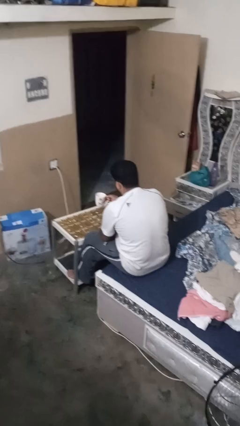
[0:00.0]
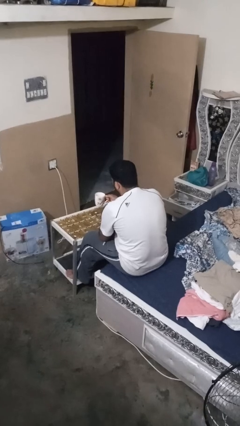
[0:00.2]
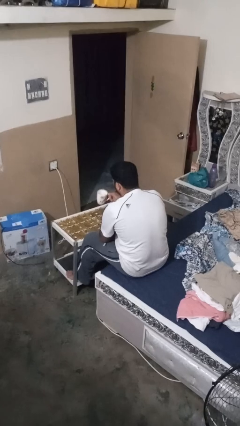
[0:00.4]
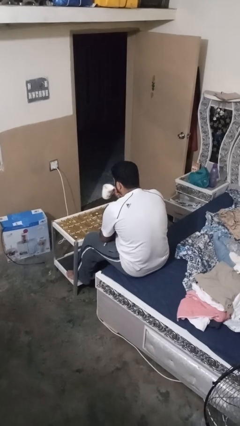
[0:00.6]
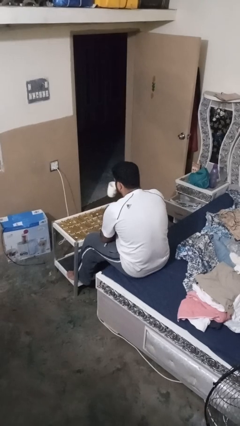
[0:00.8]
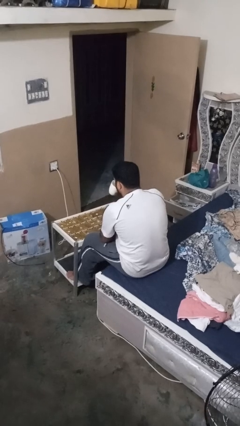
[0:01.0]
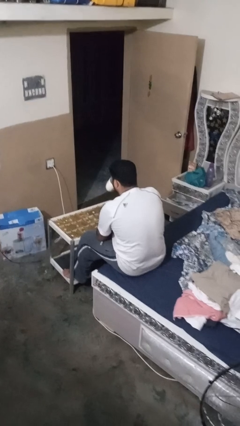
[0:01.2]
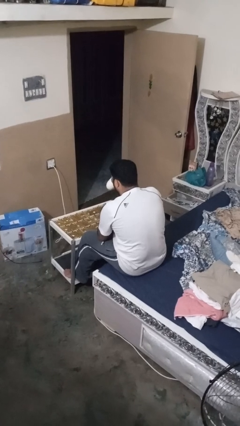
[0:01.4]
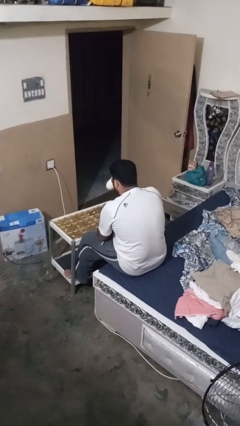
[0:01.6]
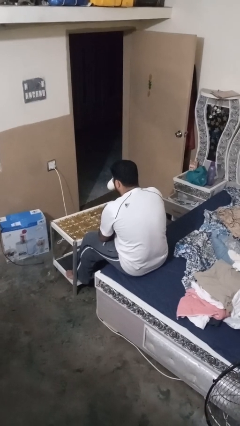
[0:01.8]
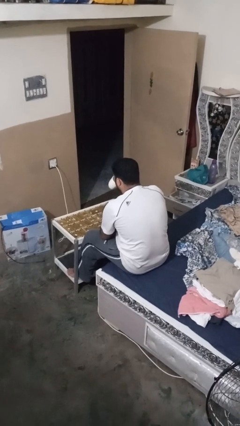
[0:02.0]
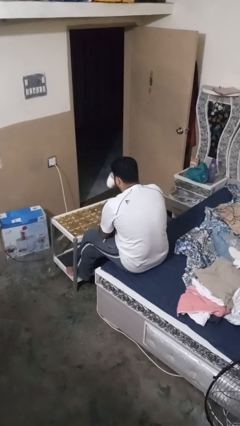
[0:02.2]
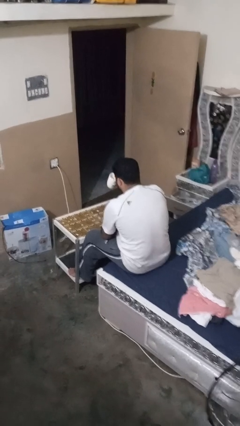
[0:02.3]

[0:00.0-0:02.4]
person drinks from mug

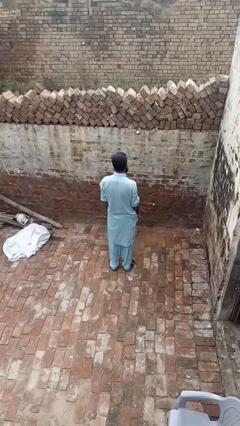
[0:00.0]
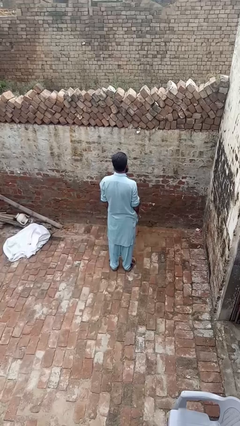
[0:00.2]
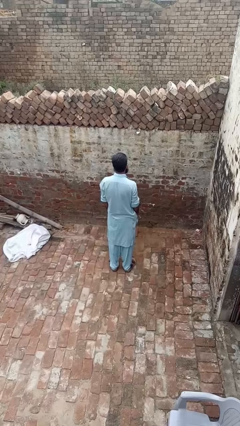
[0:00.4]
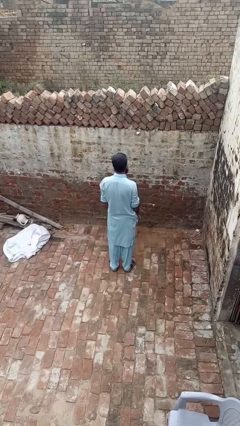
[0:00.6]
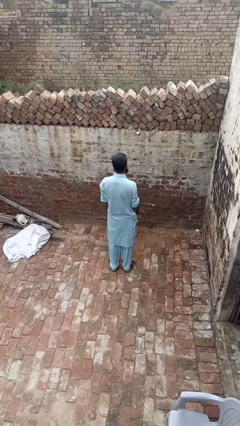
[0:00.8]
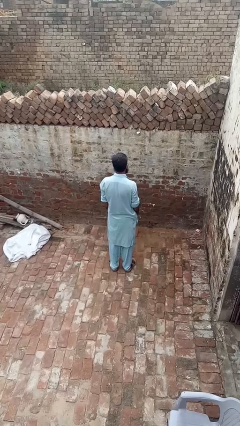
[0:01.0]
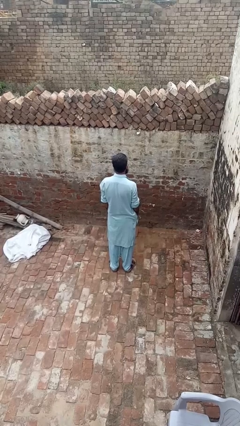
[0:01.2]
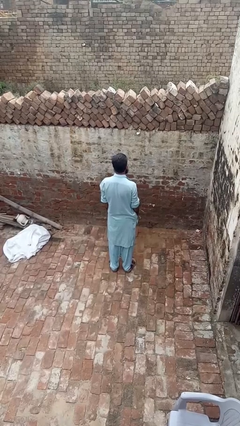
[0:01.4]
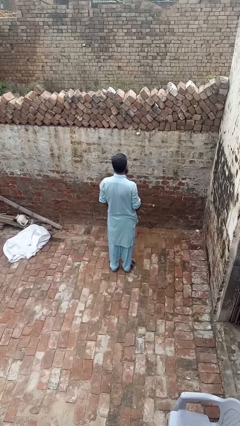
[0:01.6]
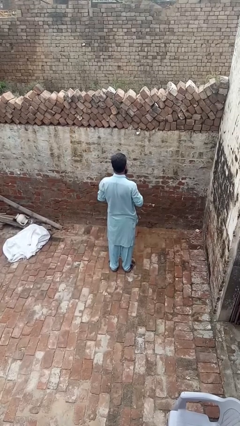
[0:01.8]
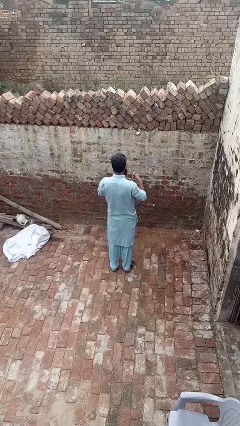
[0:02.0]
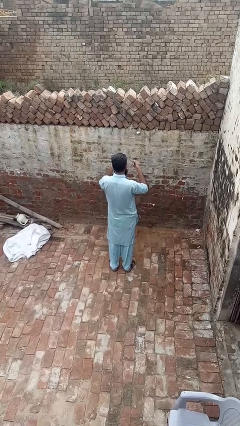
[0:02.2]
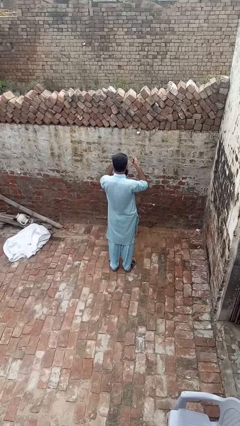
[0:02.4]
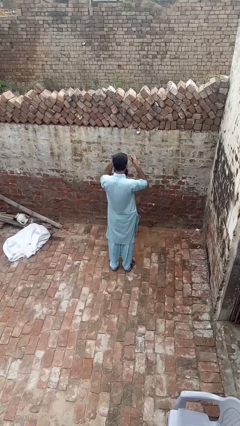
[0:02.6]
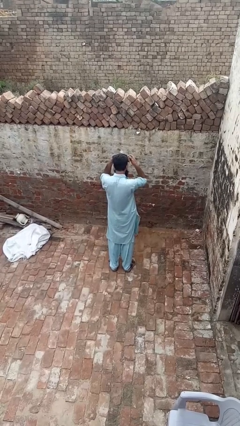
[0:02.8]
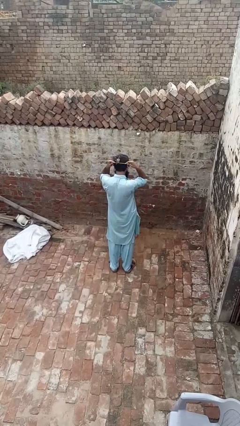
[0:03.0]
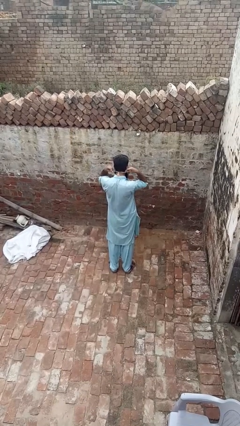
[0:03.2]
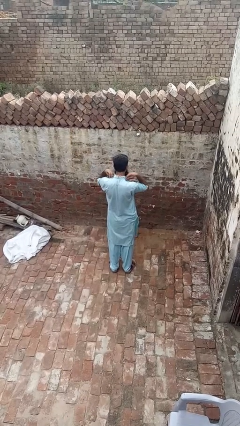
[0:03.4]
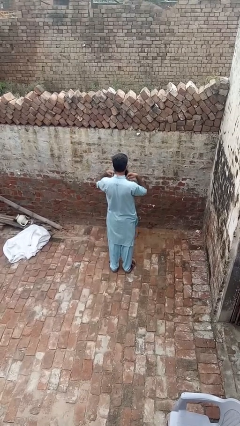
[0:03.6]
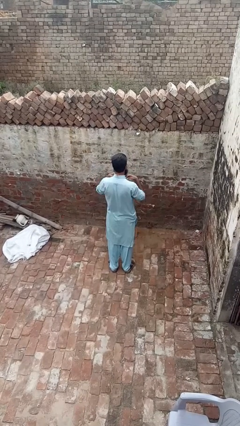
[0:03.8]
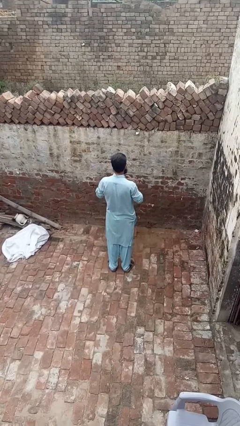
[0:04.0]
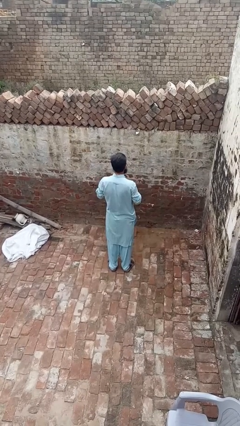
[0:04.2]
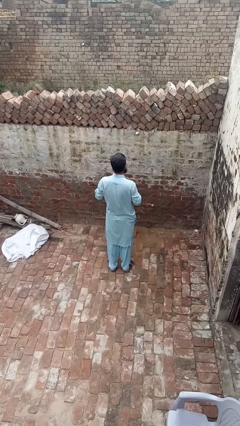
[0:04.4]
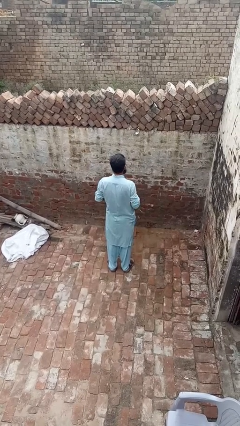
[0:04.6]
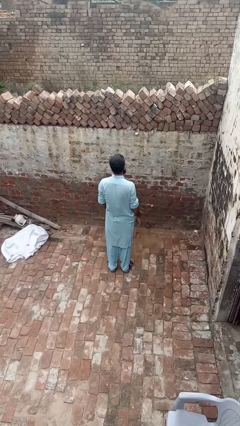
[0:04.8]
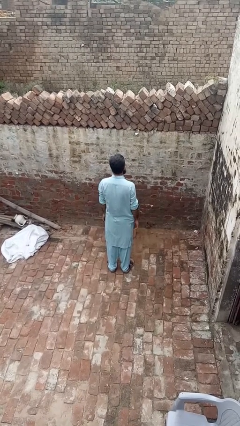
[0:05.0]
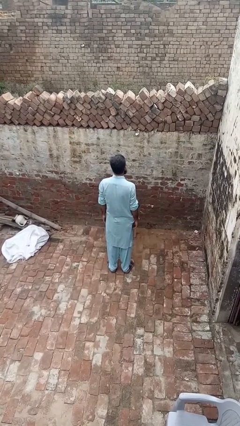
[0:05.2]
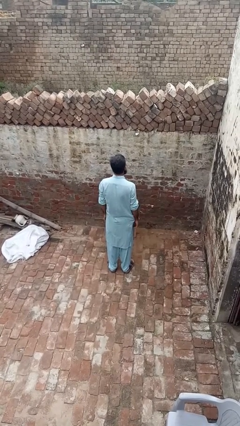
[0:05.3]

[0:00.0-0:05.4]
person puts on necklace

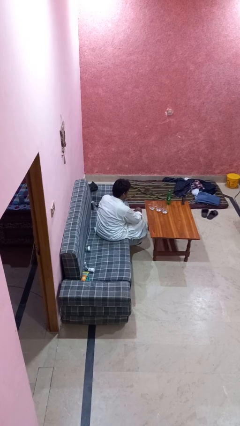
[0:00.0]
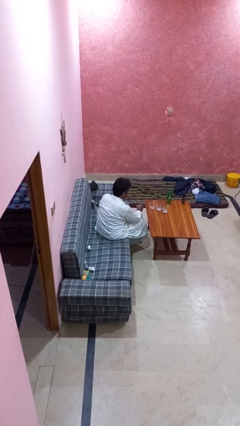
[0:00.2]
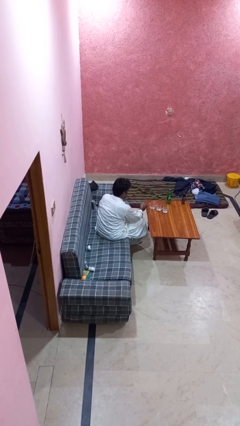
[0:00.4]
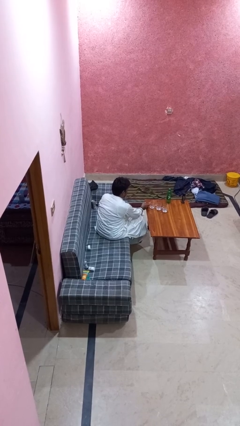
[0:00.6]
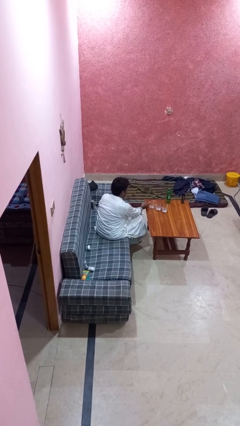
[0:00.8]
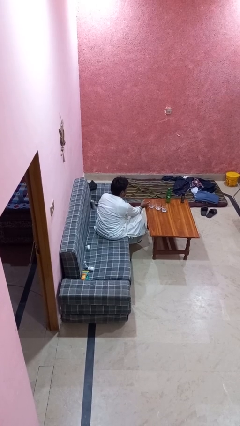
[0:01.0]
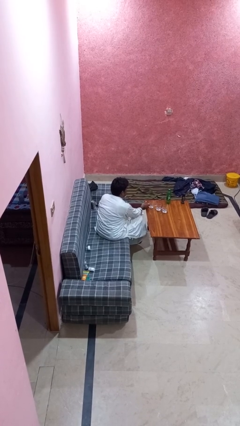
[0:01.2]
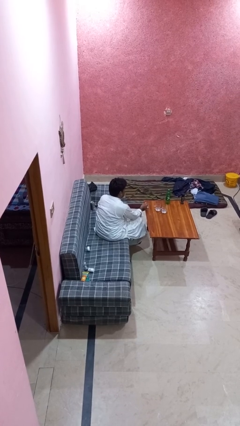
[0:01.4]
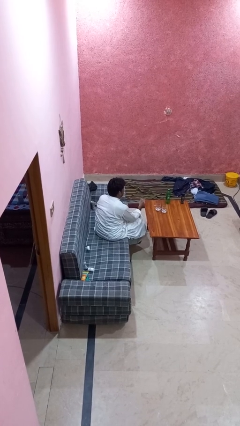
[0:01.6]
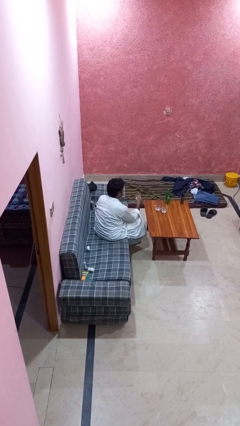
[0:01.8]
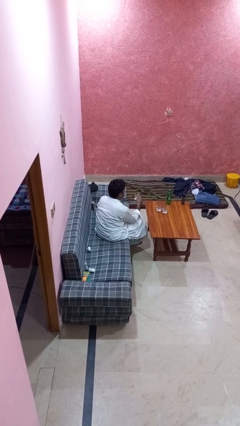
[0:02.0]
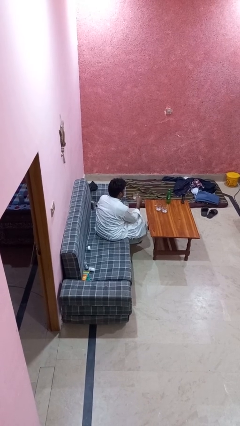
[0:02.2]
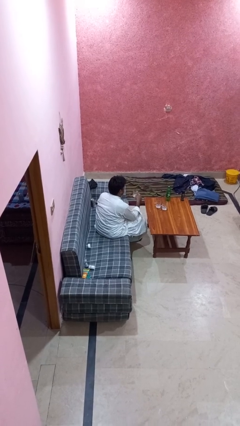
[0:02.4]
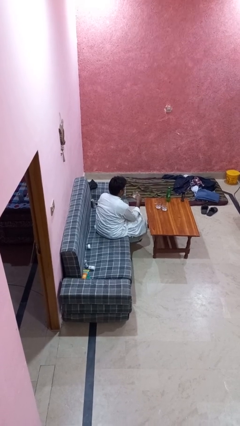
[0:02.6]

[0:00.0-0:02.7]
person picks up object from table

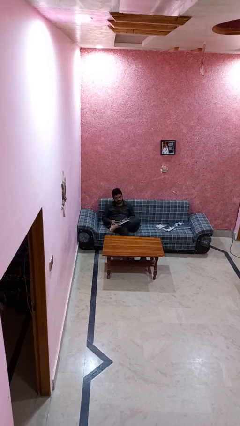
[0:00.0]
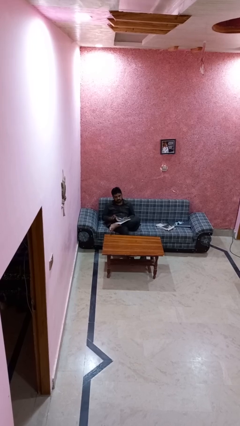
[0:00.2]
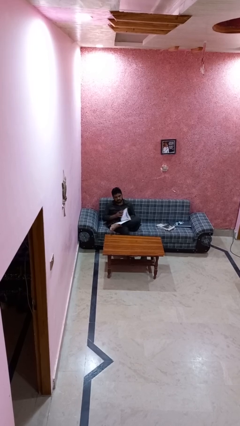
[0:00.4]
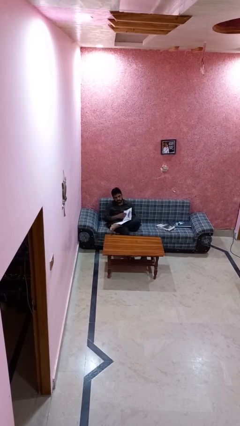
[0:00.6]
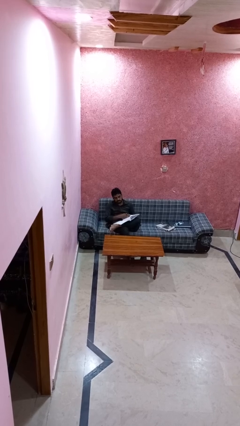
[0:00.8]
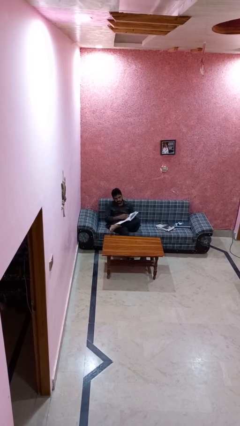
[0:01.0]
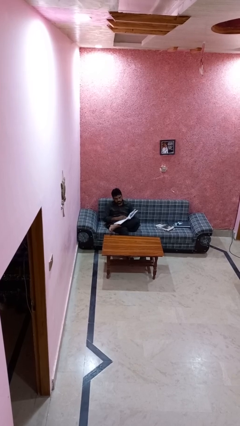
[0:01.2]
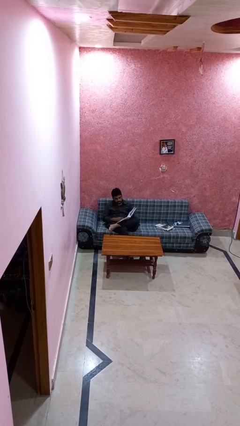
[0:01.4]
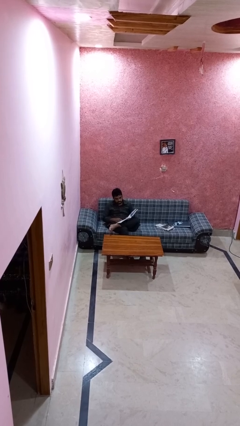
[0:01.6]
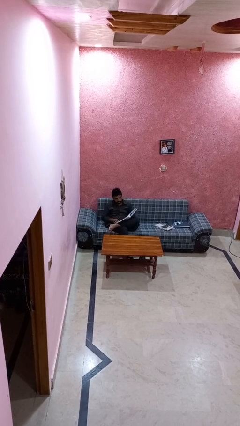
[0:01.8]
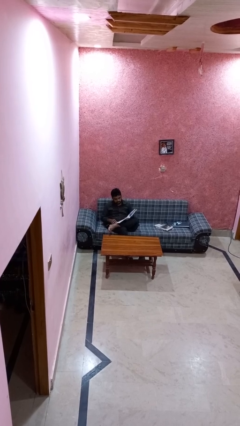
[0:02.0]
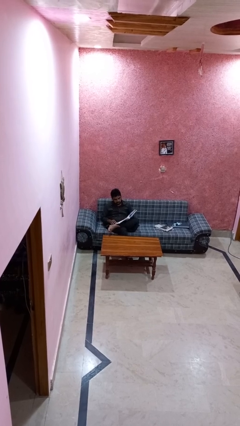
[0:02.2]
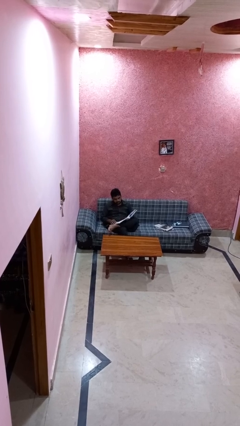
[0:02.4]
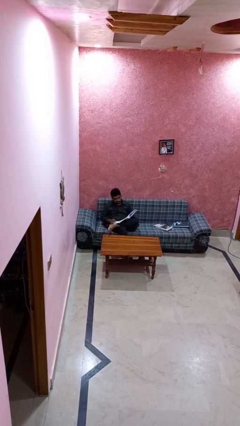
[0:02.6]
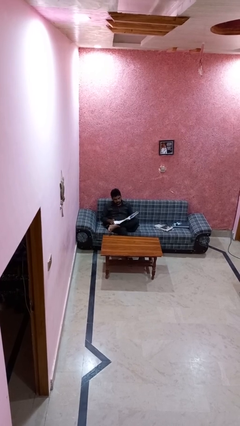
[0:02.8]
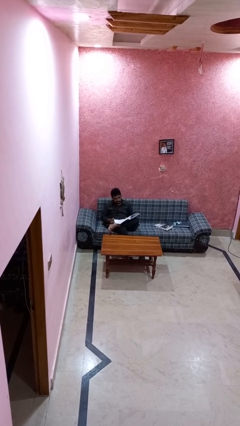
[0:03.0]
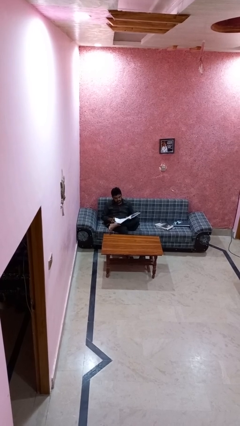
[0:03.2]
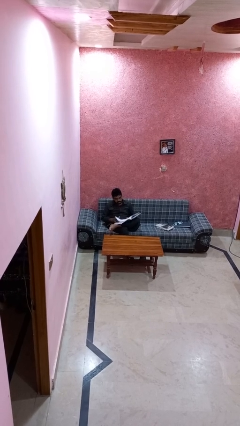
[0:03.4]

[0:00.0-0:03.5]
person reads magazine

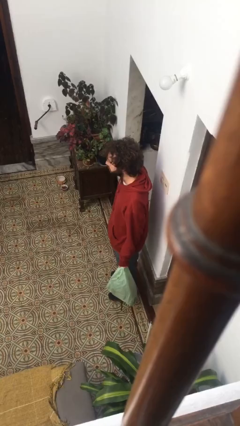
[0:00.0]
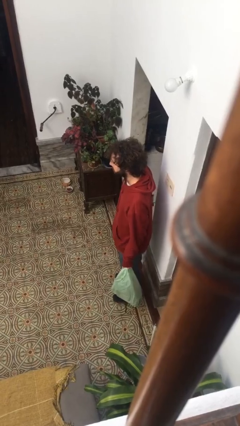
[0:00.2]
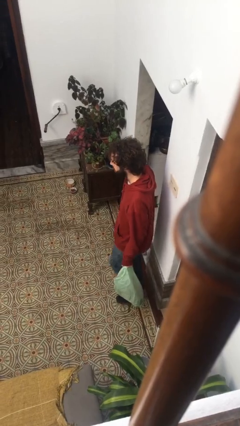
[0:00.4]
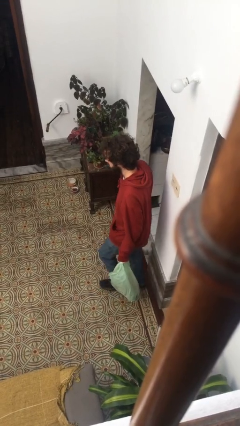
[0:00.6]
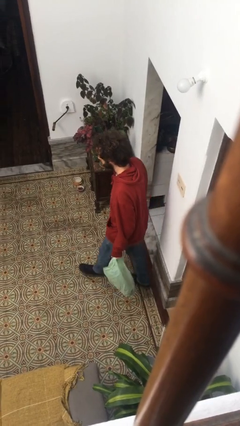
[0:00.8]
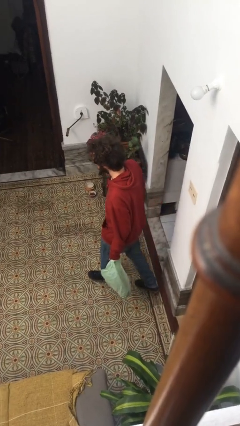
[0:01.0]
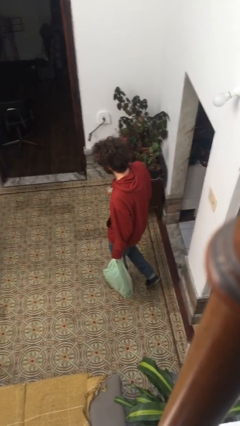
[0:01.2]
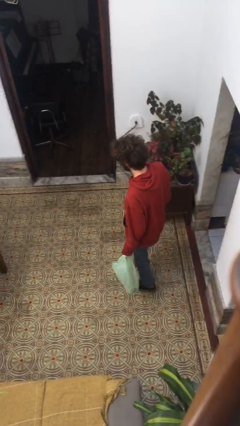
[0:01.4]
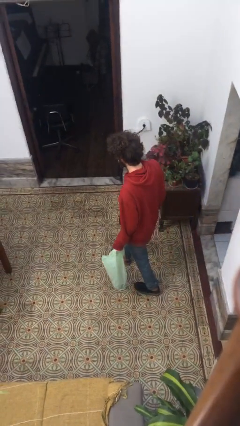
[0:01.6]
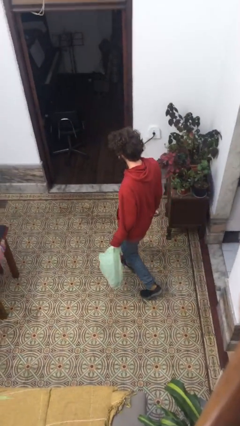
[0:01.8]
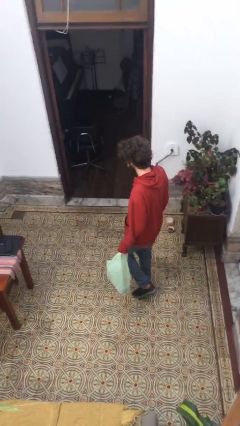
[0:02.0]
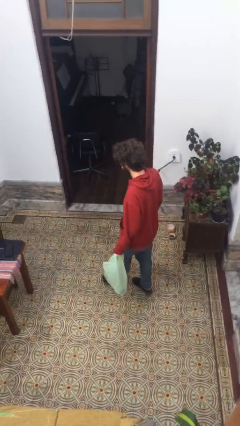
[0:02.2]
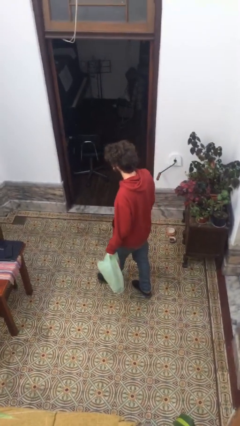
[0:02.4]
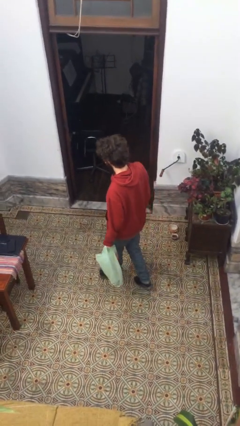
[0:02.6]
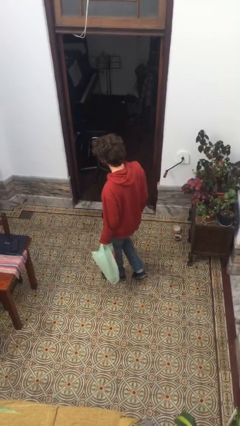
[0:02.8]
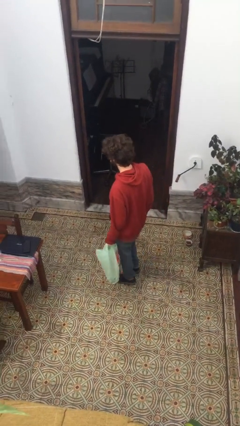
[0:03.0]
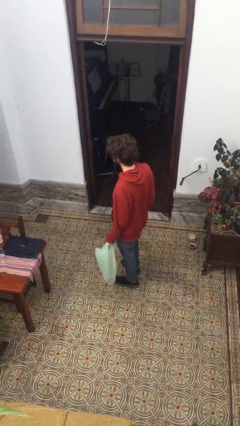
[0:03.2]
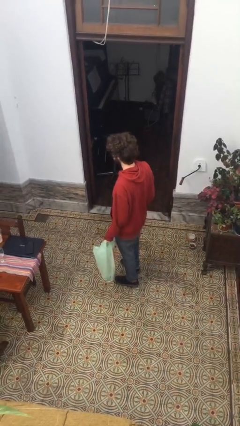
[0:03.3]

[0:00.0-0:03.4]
person carries groceries

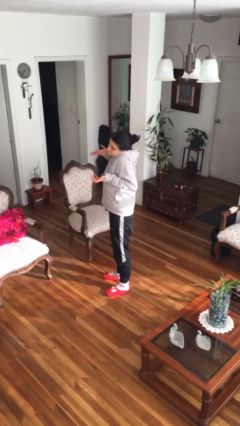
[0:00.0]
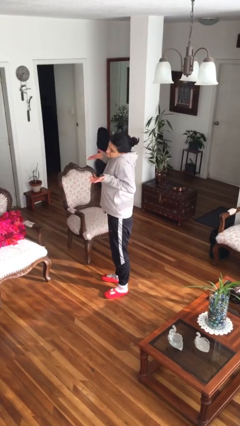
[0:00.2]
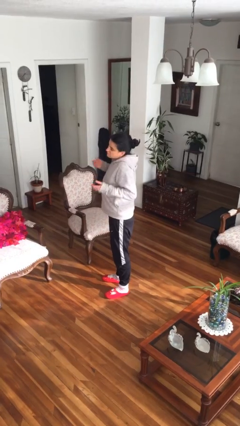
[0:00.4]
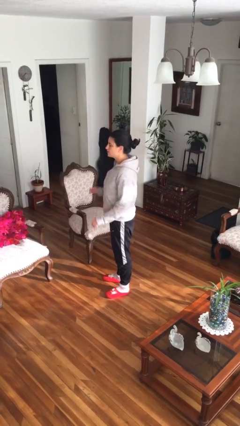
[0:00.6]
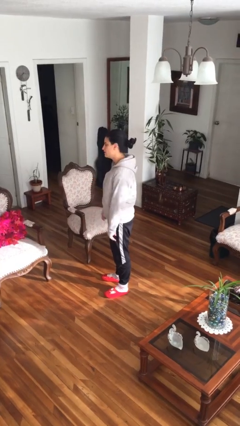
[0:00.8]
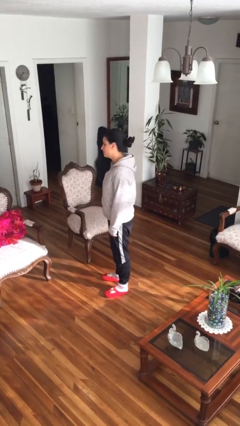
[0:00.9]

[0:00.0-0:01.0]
person shrugs
